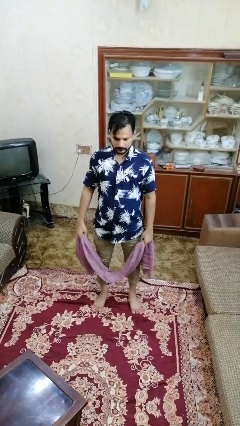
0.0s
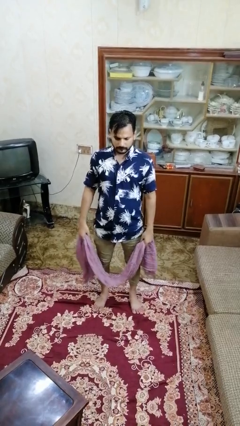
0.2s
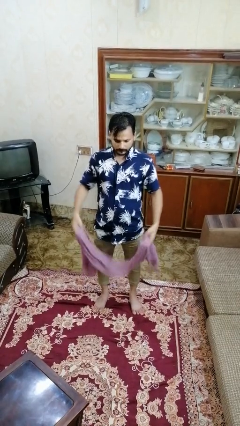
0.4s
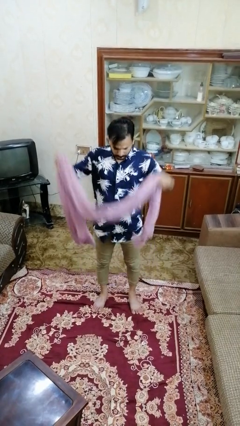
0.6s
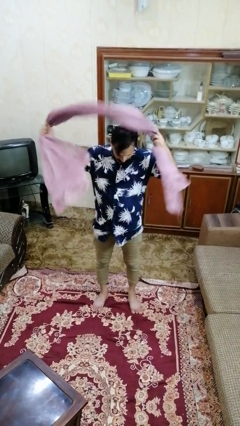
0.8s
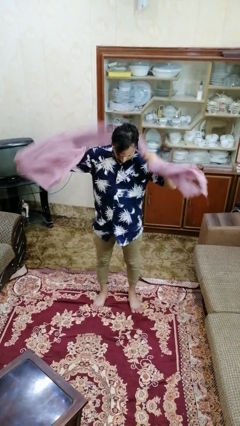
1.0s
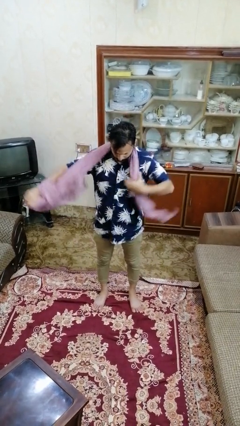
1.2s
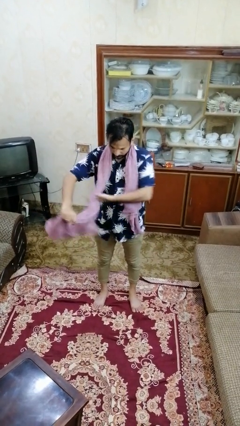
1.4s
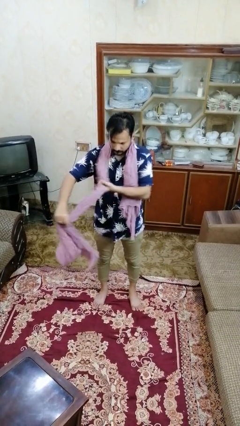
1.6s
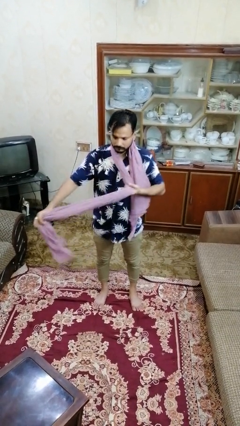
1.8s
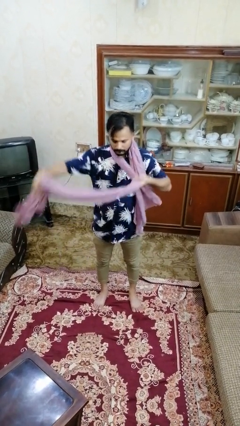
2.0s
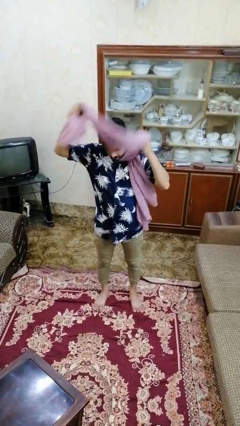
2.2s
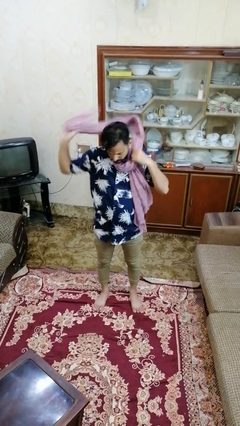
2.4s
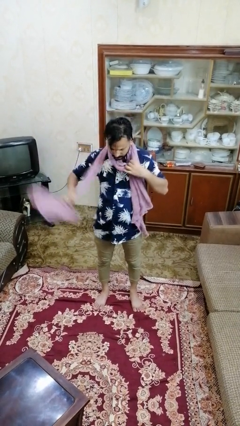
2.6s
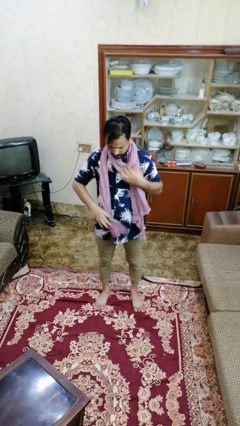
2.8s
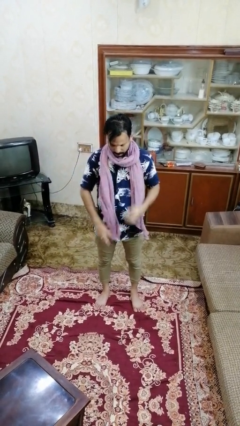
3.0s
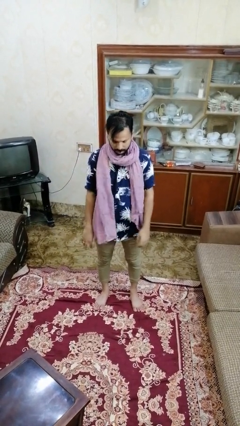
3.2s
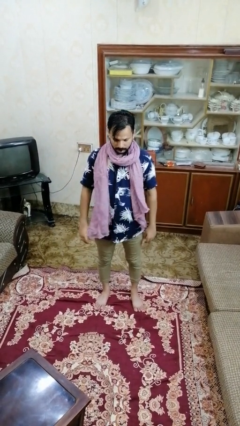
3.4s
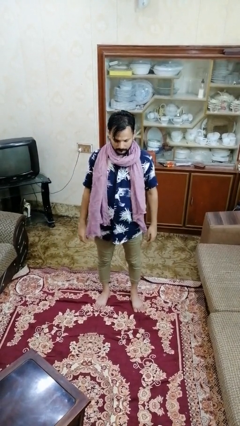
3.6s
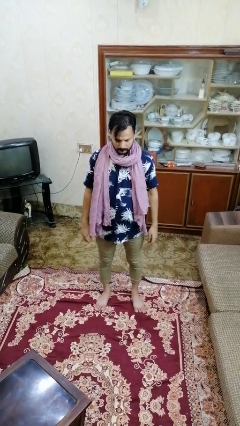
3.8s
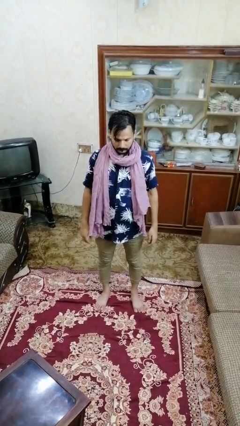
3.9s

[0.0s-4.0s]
person puts on scarf

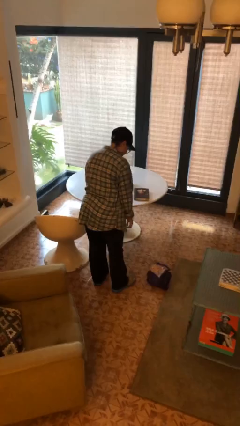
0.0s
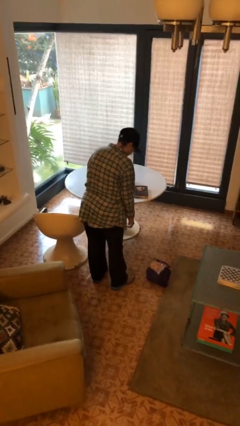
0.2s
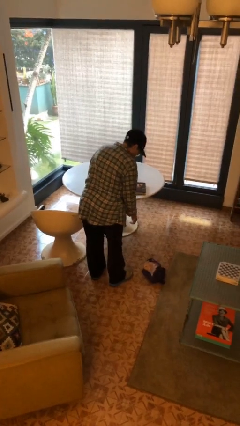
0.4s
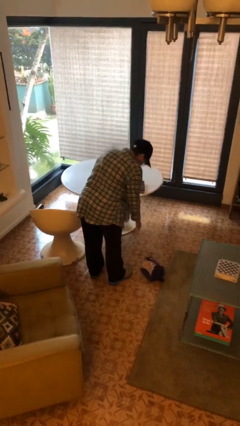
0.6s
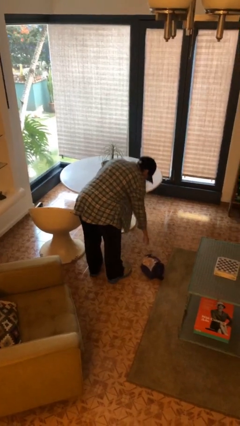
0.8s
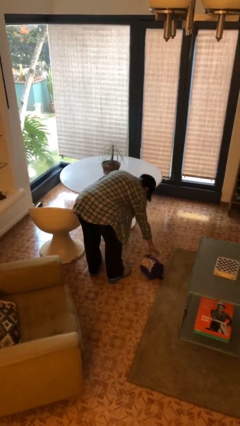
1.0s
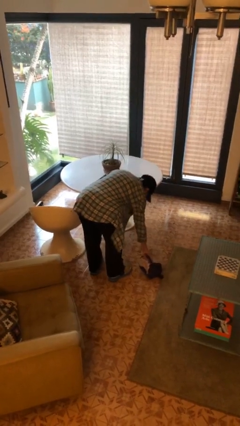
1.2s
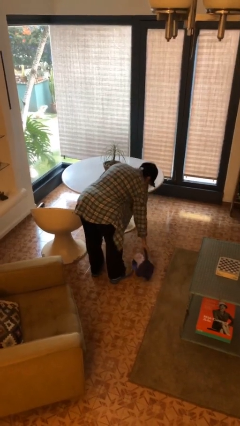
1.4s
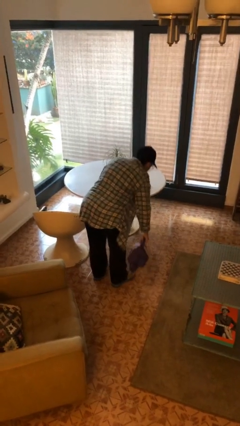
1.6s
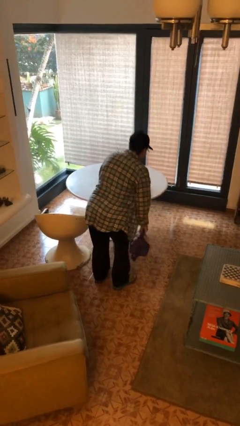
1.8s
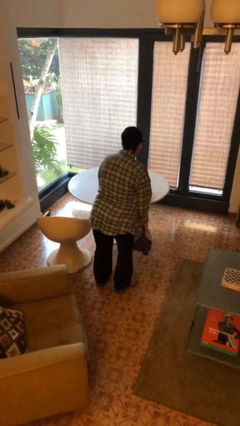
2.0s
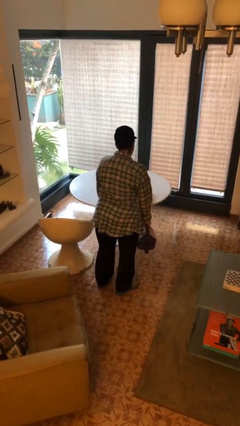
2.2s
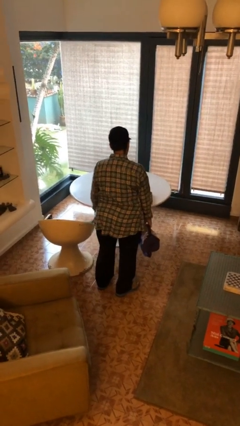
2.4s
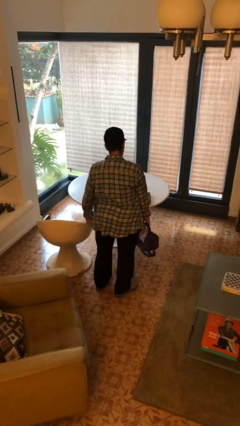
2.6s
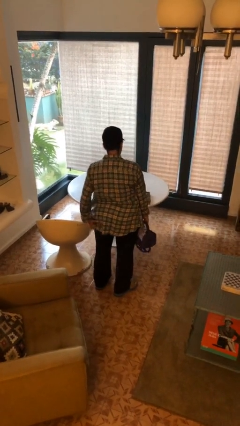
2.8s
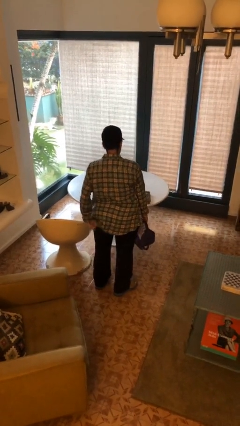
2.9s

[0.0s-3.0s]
person picks up object from floor

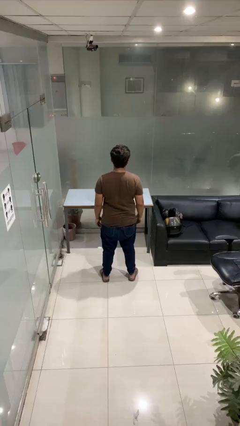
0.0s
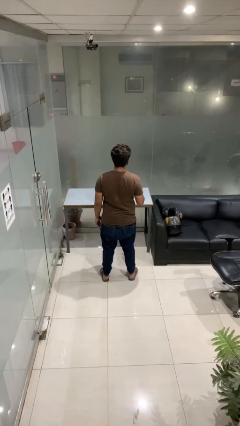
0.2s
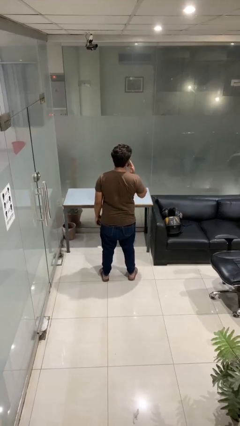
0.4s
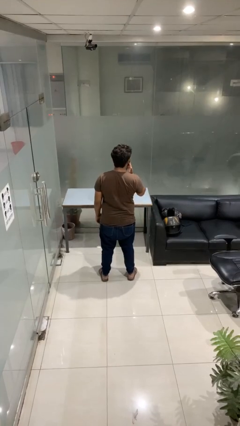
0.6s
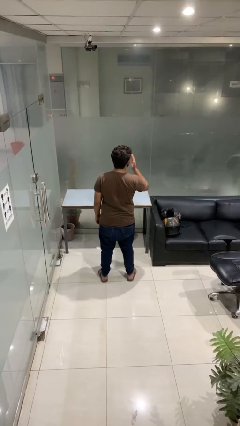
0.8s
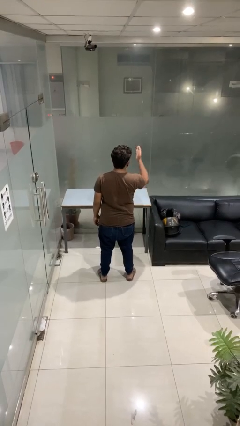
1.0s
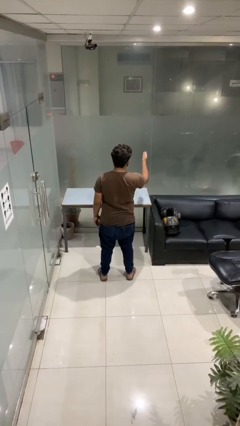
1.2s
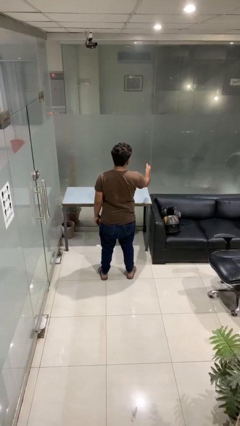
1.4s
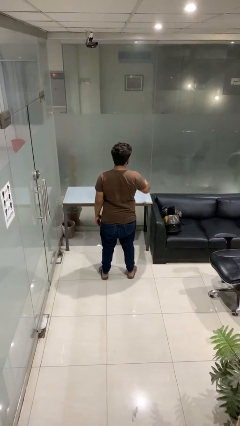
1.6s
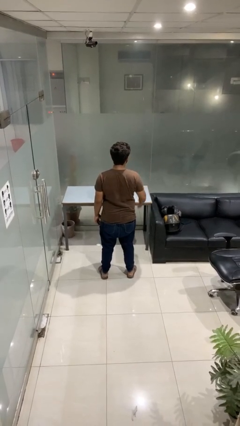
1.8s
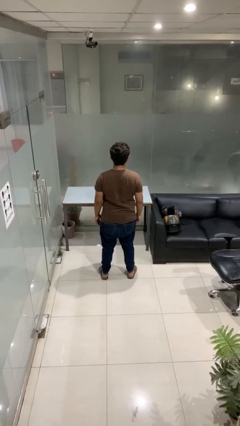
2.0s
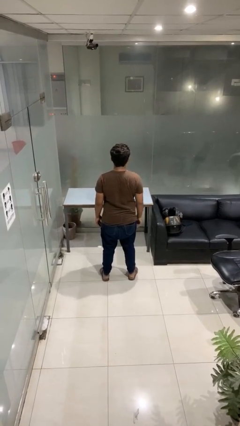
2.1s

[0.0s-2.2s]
person gestures blow kiss

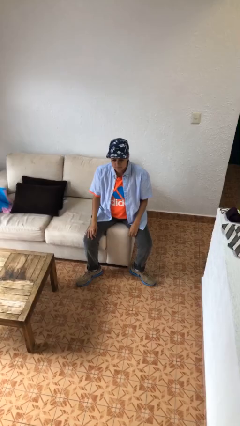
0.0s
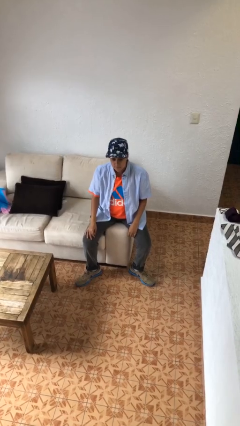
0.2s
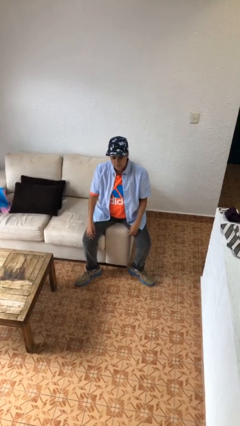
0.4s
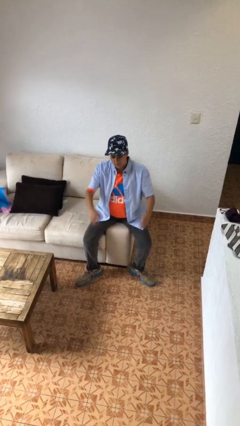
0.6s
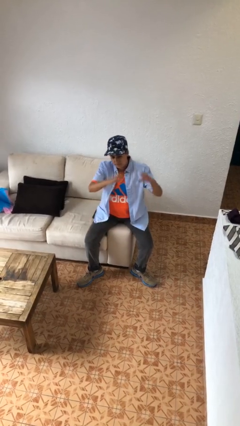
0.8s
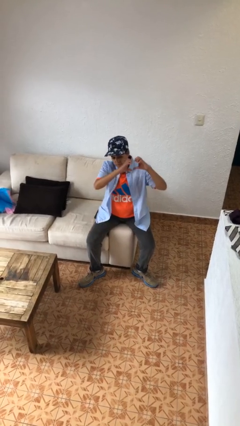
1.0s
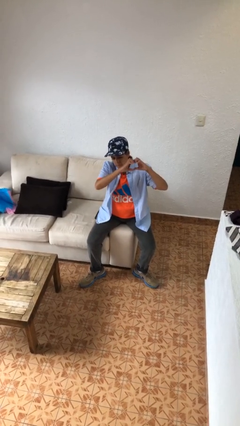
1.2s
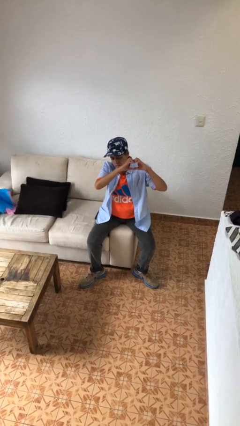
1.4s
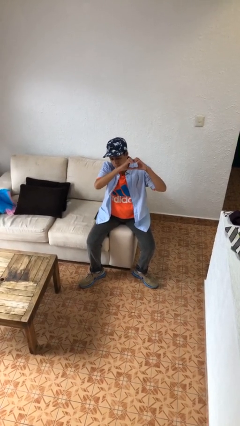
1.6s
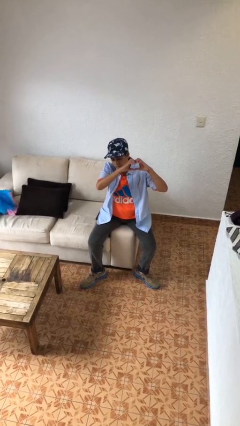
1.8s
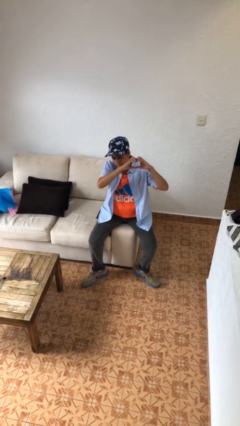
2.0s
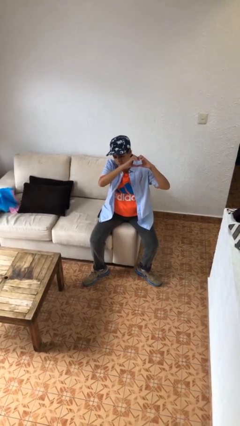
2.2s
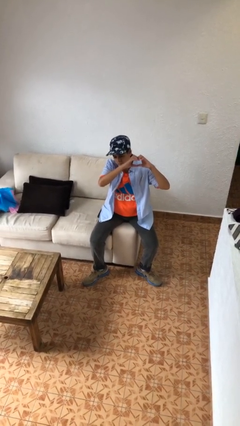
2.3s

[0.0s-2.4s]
person gestures heart

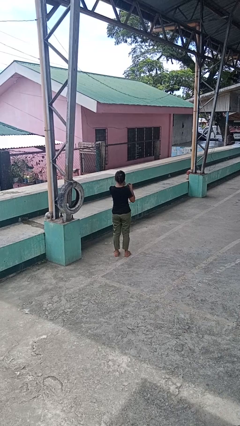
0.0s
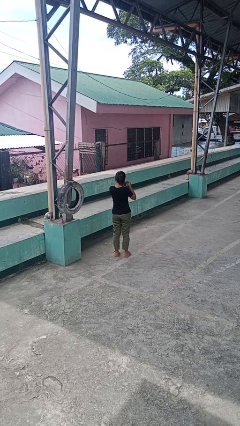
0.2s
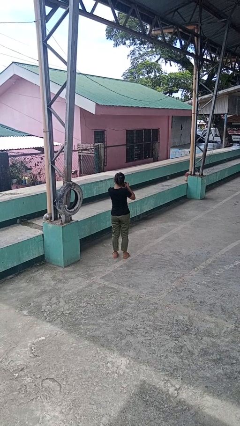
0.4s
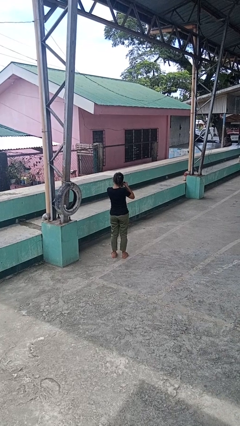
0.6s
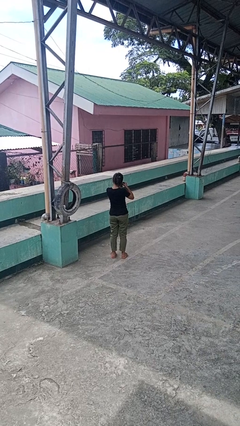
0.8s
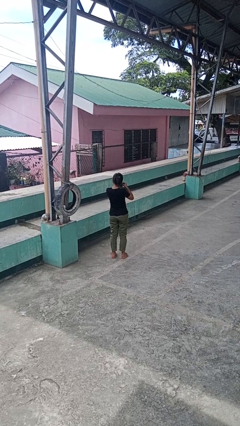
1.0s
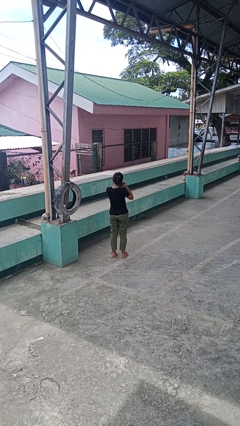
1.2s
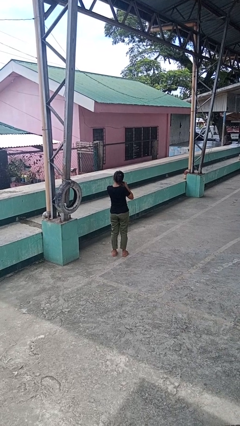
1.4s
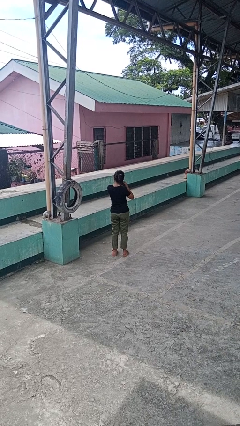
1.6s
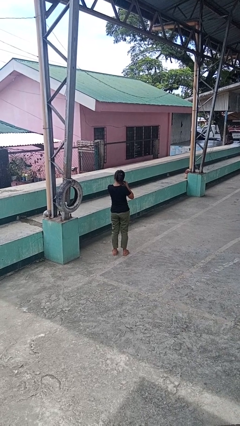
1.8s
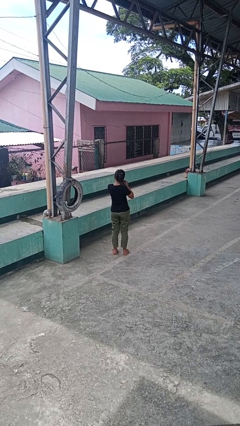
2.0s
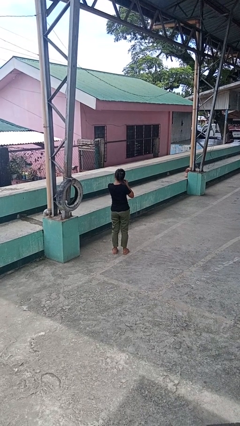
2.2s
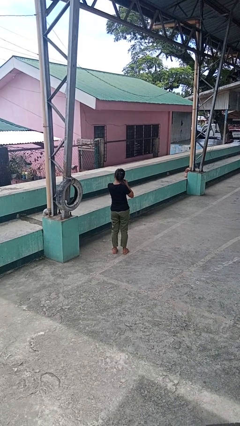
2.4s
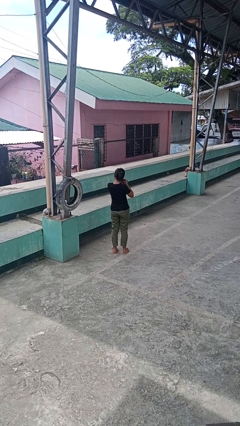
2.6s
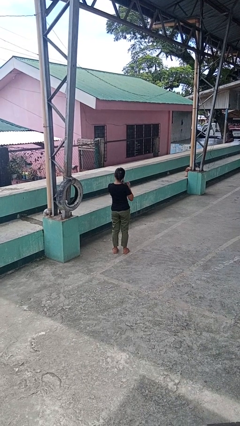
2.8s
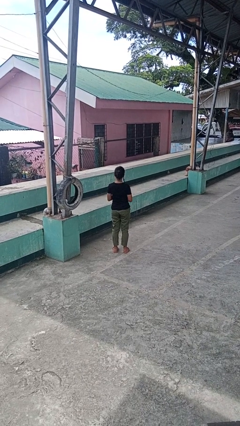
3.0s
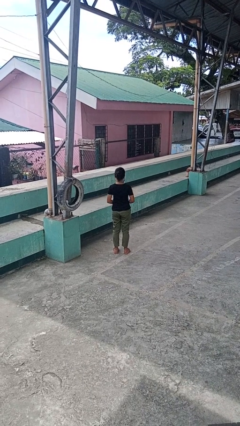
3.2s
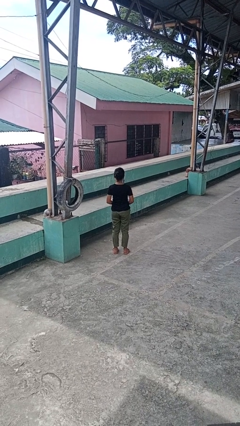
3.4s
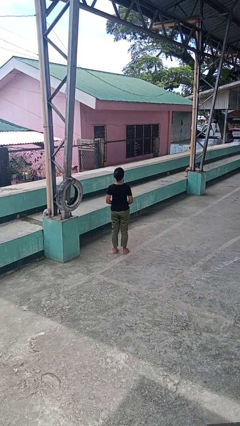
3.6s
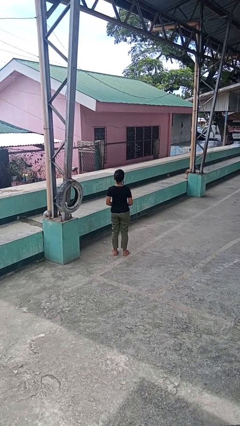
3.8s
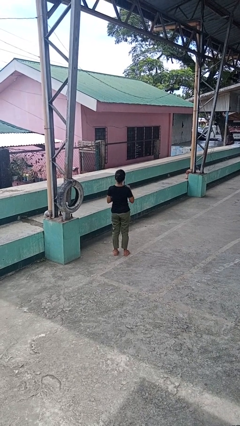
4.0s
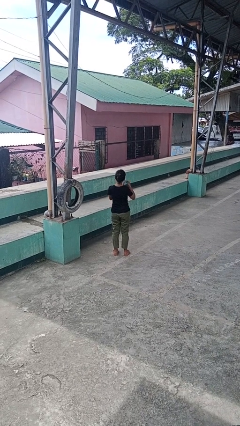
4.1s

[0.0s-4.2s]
person puts on earrings

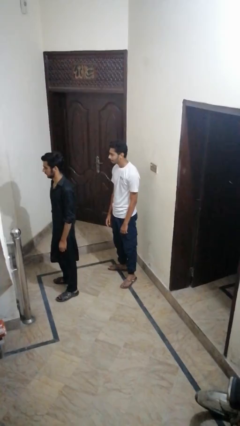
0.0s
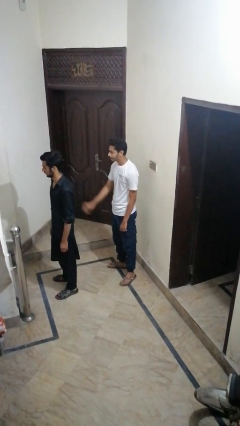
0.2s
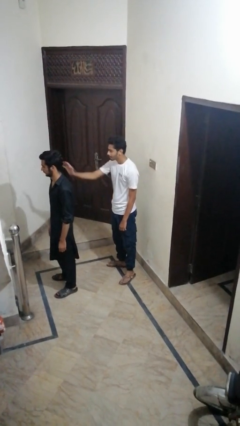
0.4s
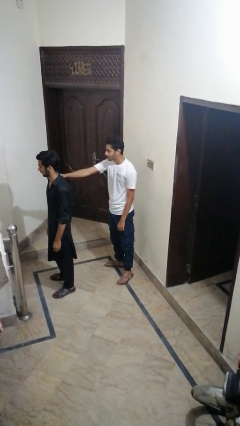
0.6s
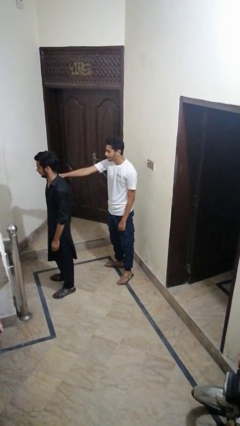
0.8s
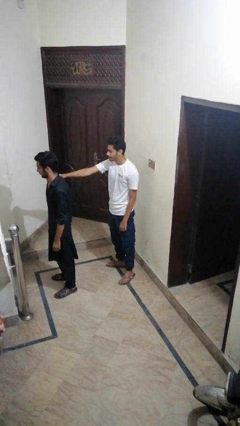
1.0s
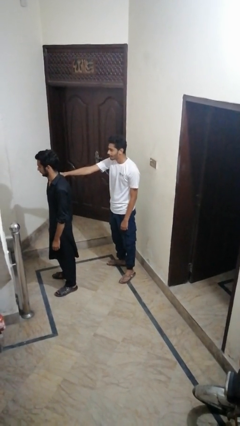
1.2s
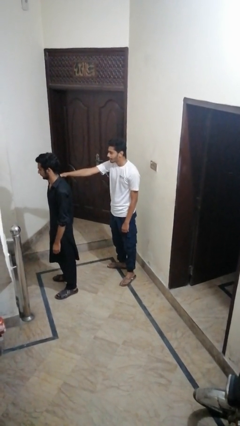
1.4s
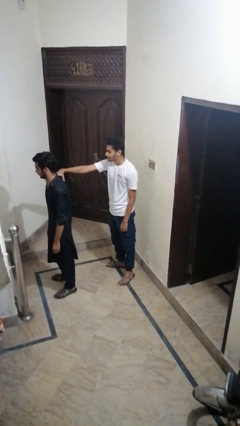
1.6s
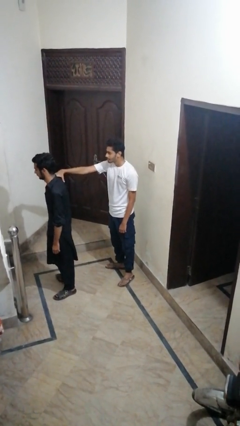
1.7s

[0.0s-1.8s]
person grabs person by shoulder
